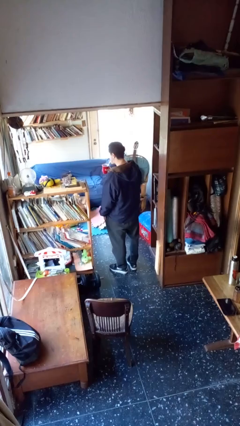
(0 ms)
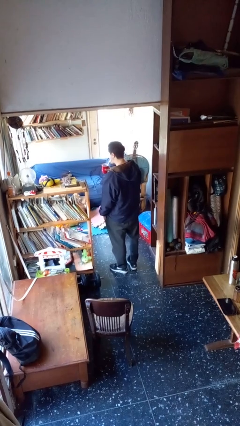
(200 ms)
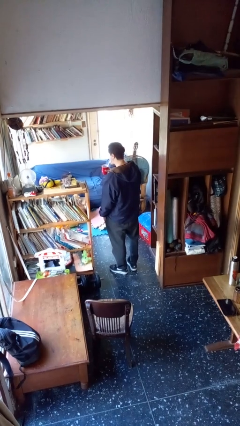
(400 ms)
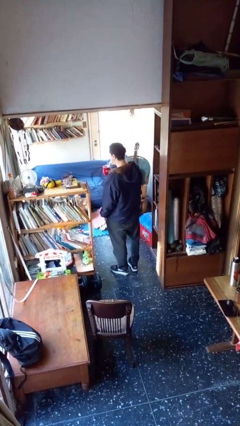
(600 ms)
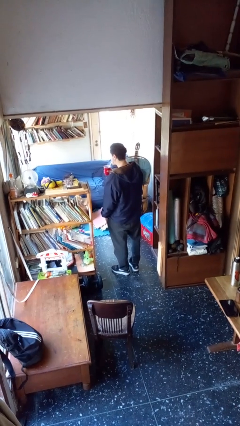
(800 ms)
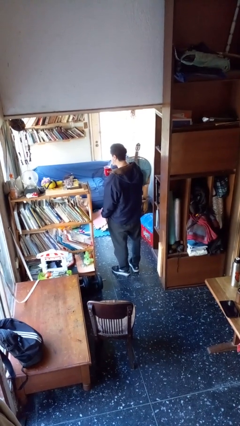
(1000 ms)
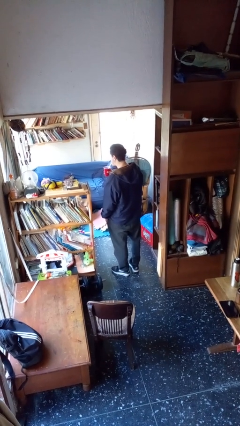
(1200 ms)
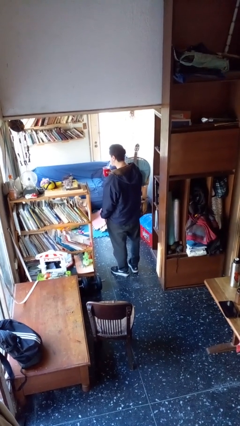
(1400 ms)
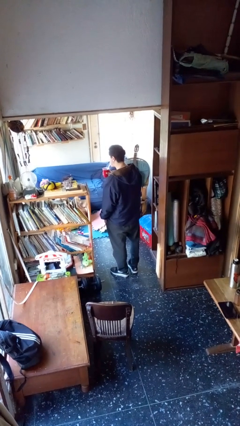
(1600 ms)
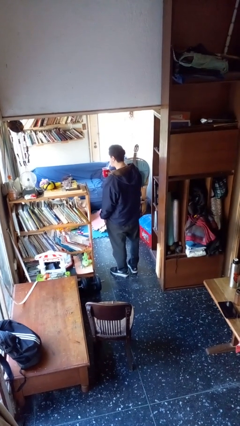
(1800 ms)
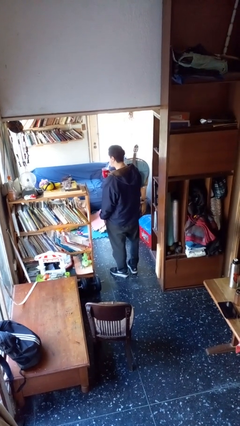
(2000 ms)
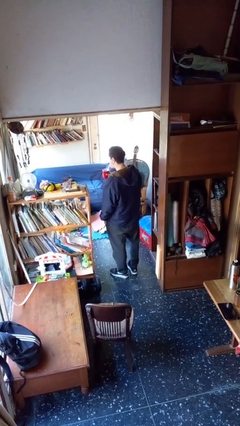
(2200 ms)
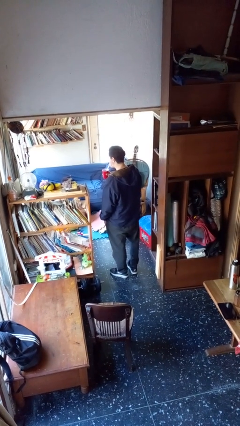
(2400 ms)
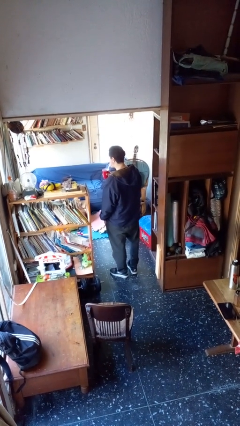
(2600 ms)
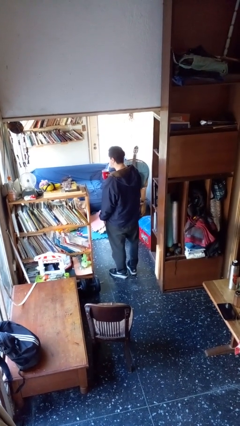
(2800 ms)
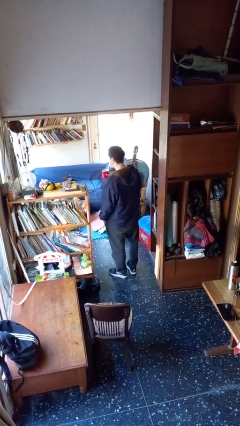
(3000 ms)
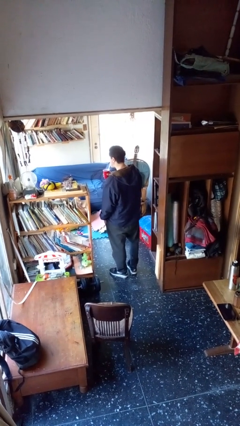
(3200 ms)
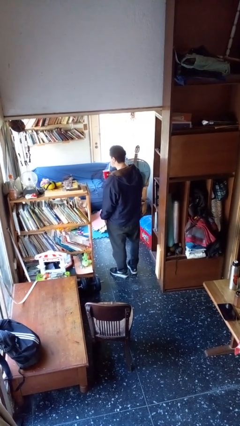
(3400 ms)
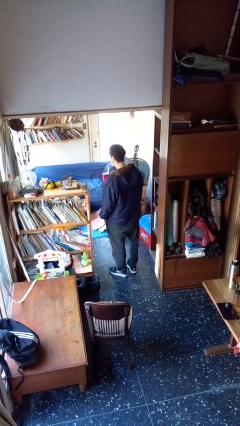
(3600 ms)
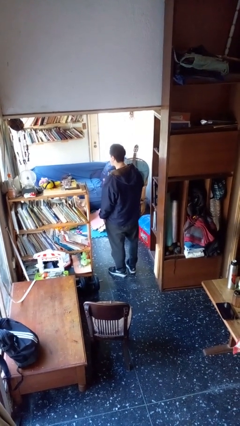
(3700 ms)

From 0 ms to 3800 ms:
person drinks from straw

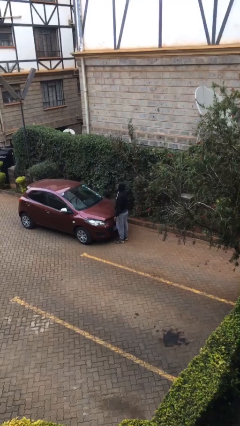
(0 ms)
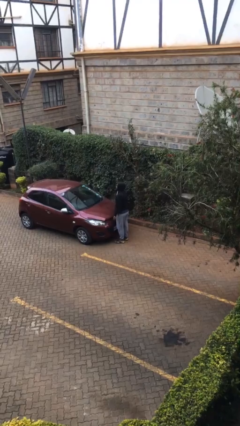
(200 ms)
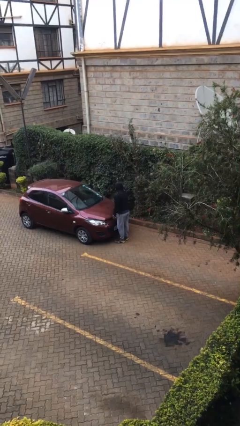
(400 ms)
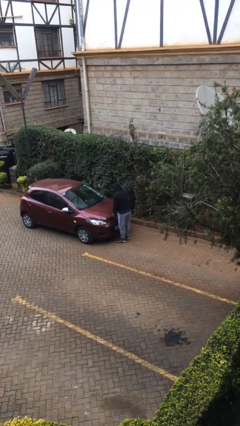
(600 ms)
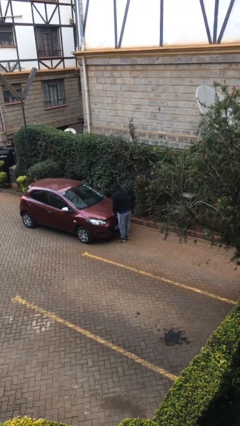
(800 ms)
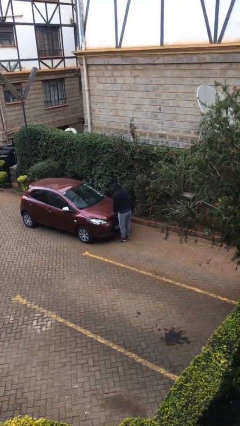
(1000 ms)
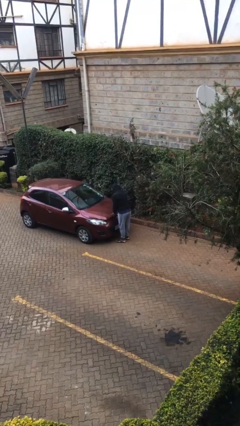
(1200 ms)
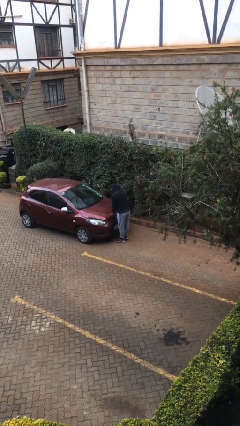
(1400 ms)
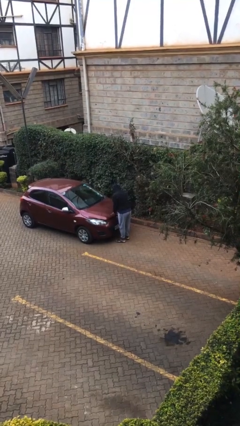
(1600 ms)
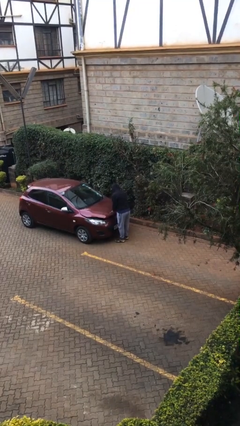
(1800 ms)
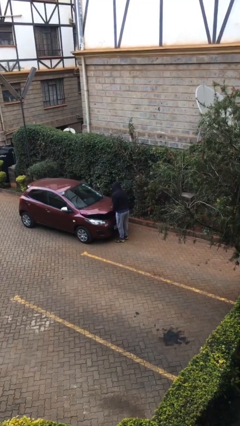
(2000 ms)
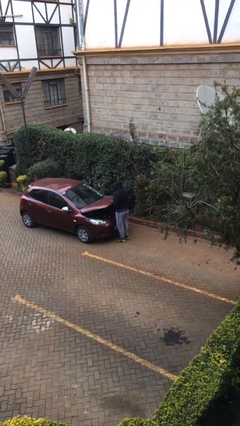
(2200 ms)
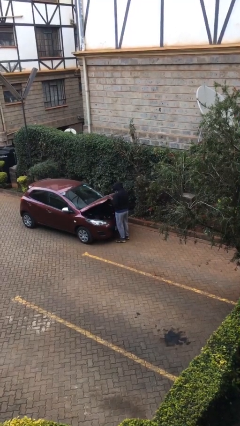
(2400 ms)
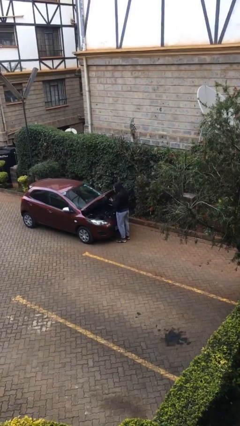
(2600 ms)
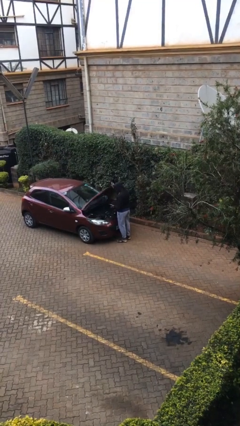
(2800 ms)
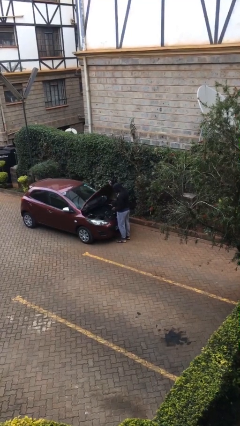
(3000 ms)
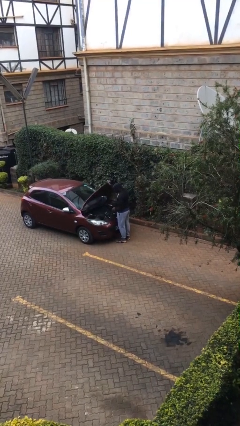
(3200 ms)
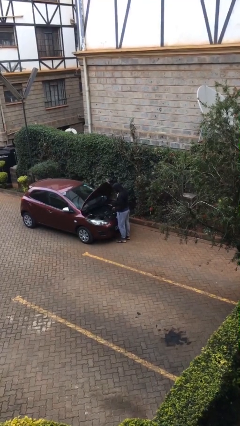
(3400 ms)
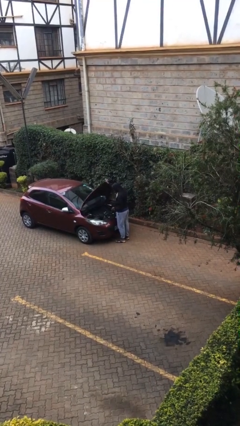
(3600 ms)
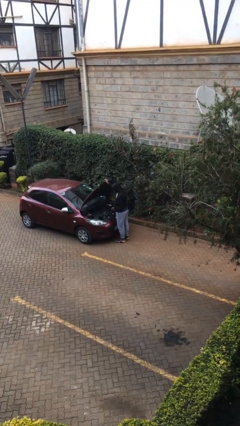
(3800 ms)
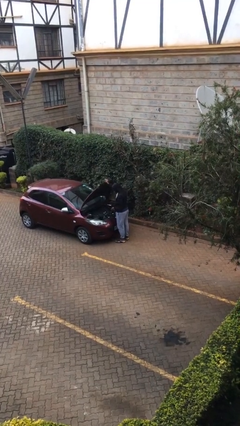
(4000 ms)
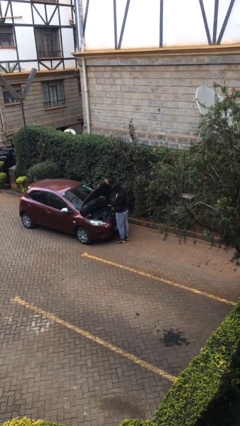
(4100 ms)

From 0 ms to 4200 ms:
person opens car hood

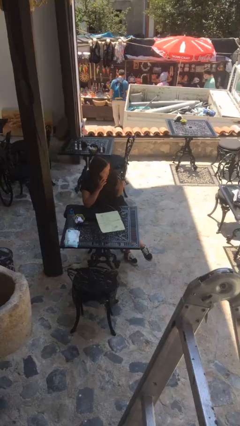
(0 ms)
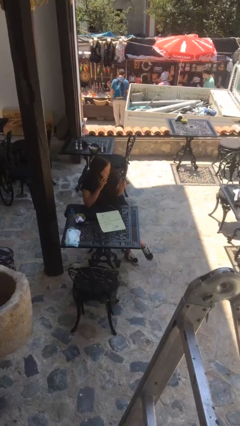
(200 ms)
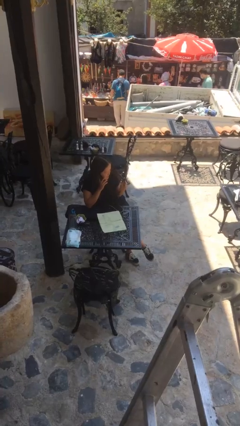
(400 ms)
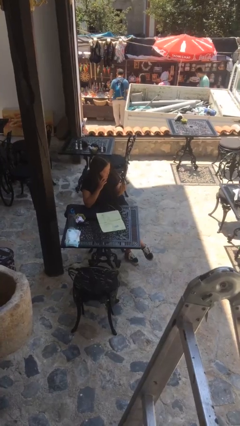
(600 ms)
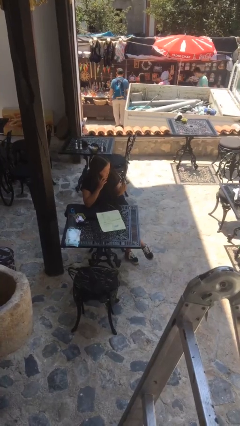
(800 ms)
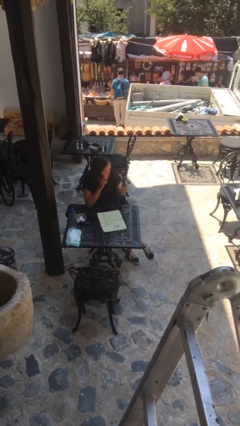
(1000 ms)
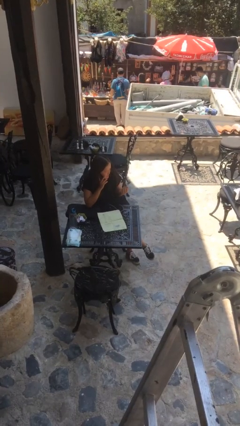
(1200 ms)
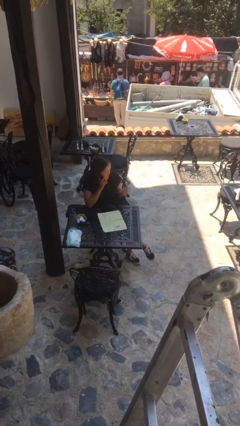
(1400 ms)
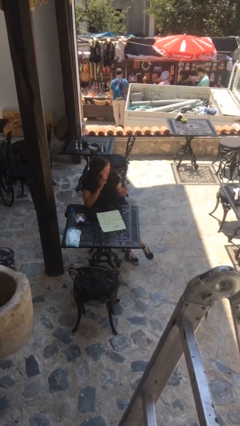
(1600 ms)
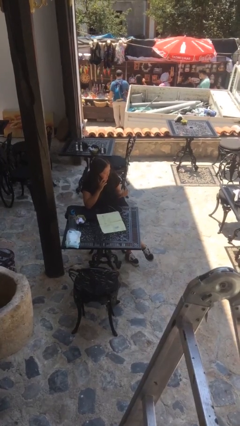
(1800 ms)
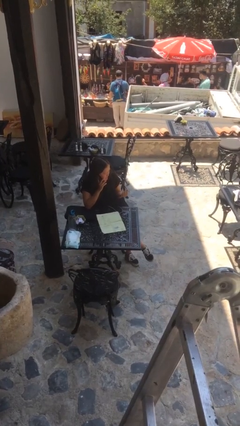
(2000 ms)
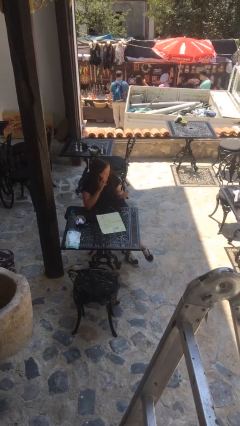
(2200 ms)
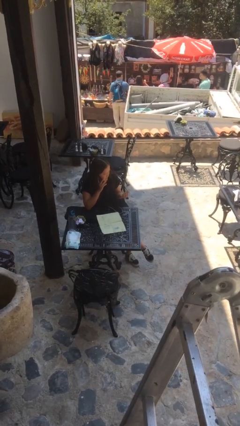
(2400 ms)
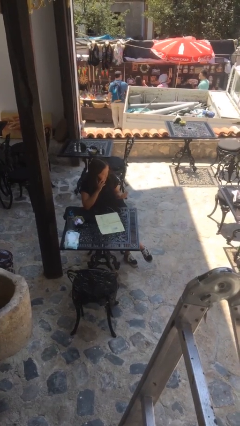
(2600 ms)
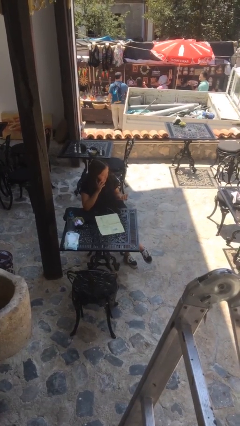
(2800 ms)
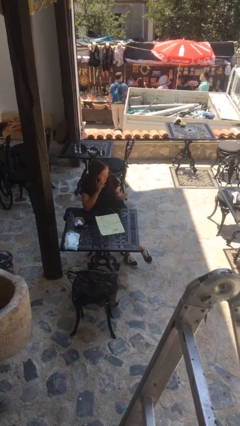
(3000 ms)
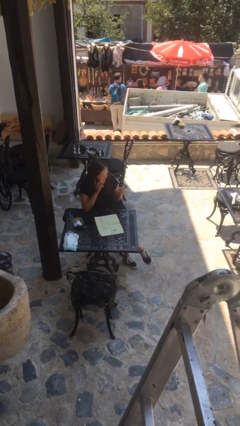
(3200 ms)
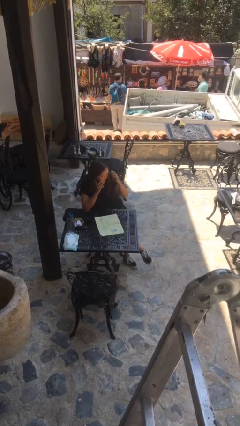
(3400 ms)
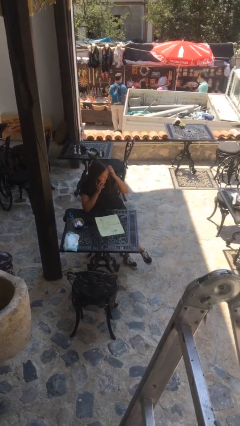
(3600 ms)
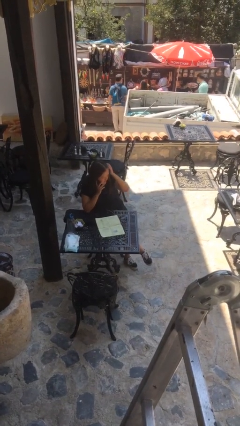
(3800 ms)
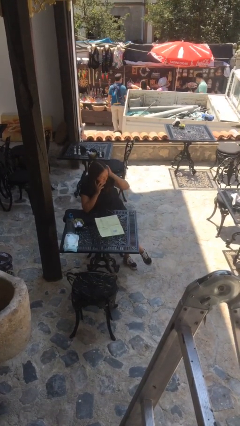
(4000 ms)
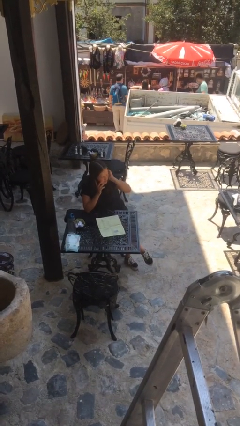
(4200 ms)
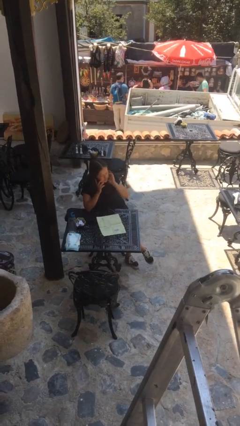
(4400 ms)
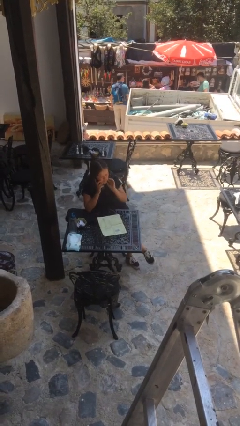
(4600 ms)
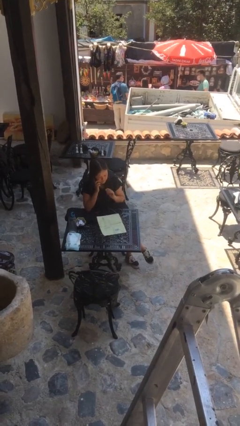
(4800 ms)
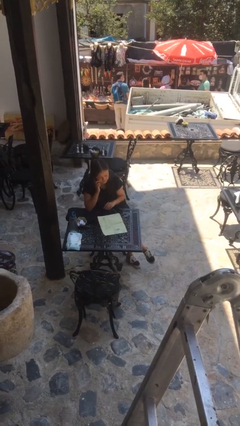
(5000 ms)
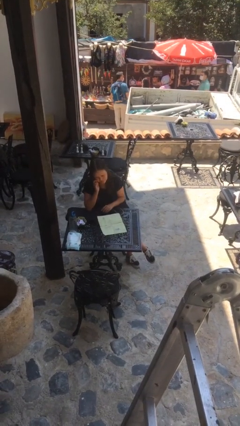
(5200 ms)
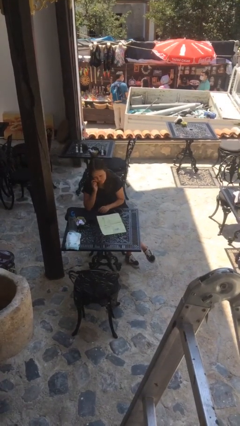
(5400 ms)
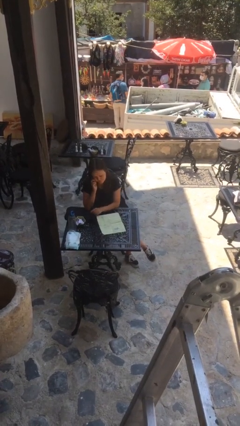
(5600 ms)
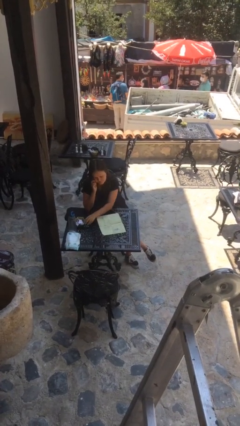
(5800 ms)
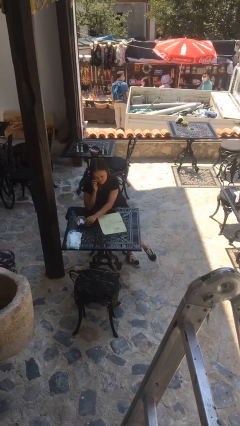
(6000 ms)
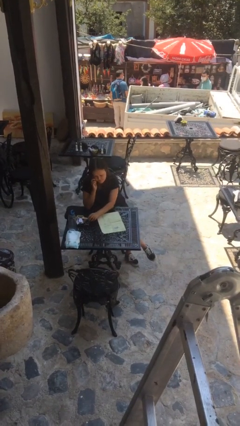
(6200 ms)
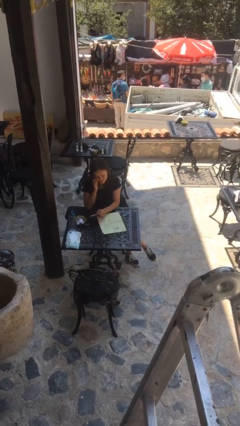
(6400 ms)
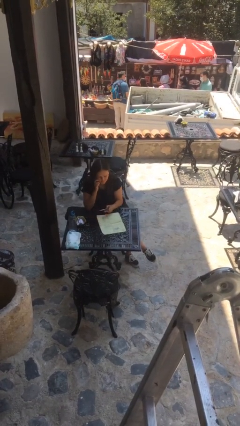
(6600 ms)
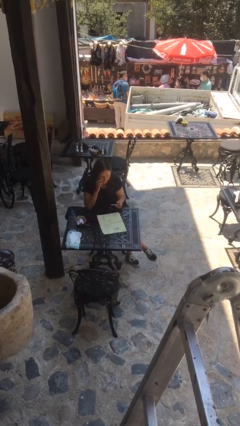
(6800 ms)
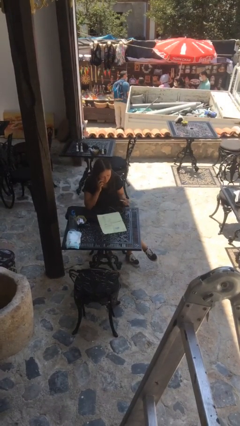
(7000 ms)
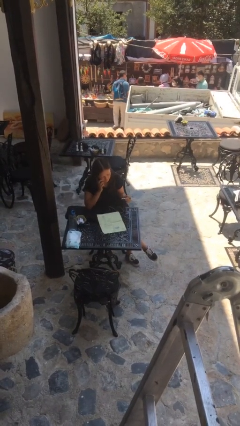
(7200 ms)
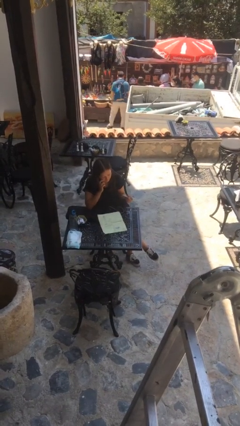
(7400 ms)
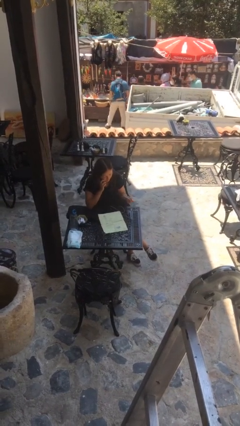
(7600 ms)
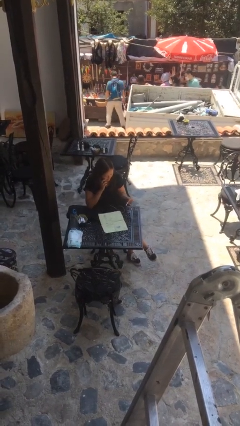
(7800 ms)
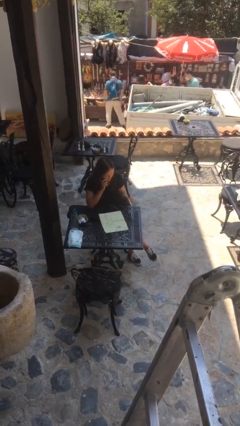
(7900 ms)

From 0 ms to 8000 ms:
person talks on phone

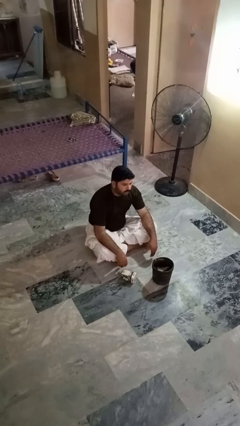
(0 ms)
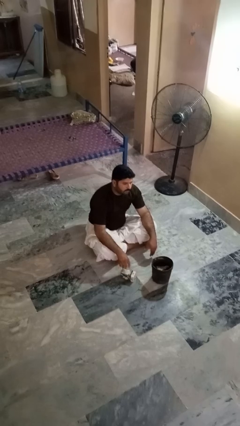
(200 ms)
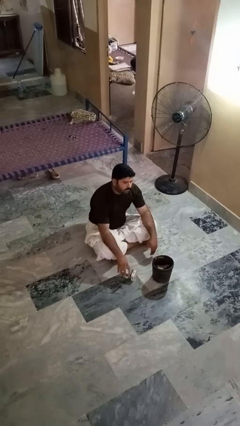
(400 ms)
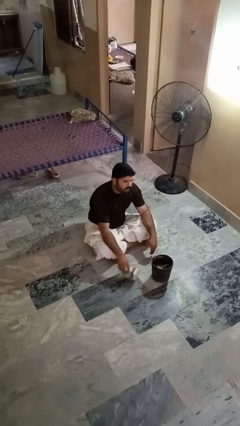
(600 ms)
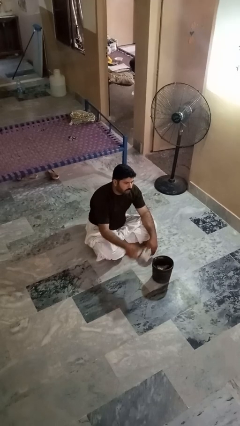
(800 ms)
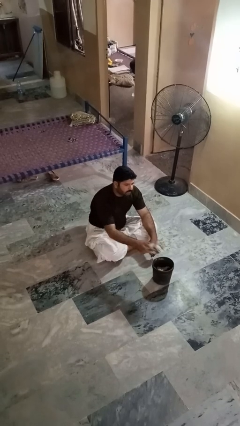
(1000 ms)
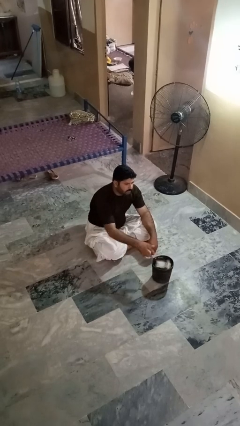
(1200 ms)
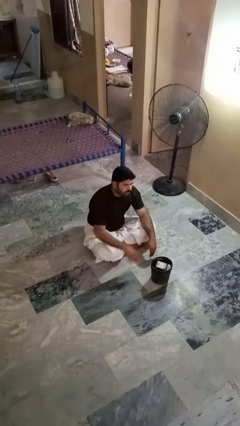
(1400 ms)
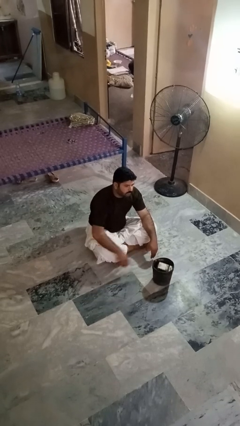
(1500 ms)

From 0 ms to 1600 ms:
person puts object into basket

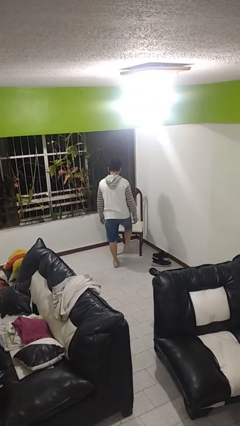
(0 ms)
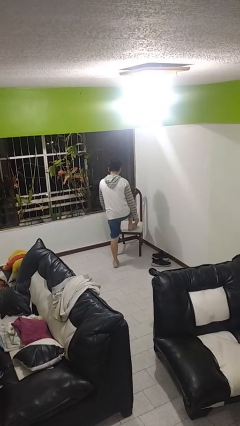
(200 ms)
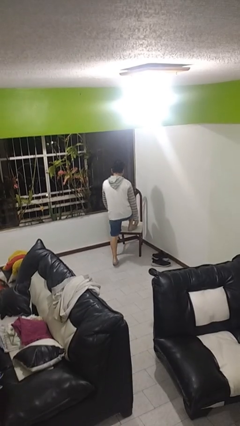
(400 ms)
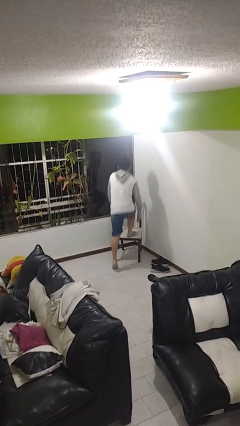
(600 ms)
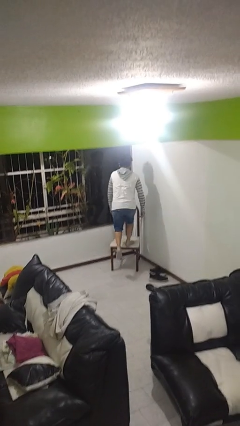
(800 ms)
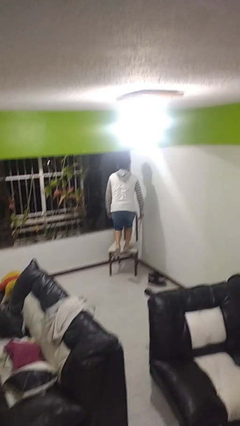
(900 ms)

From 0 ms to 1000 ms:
person climbs on chair
